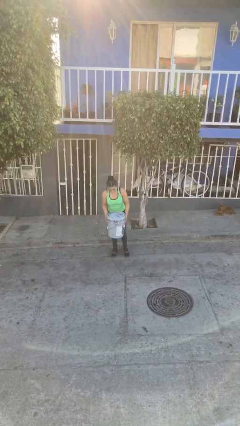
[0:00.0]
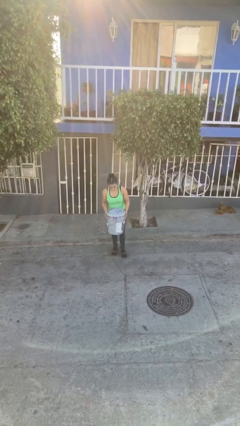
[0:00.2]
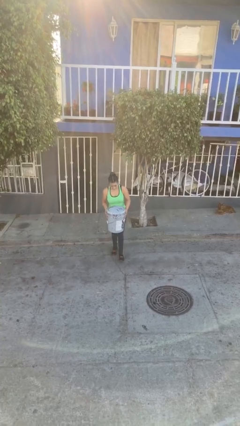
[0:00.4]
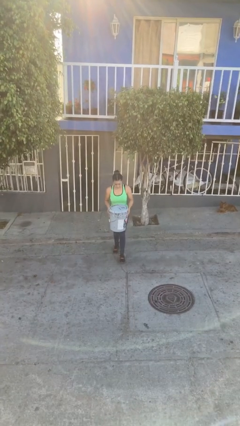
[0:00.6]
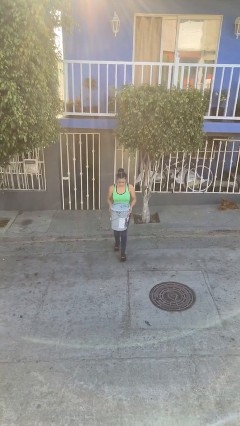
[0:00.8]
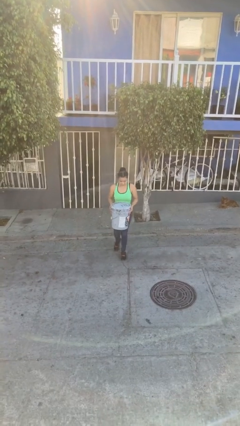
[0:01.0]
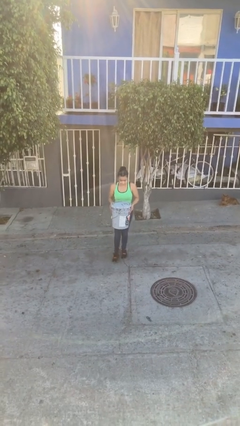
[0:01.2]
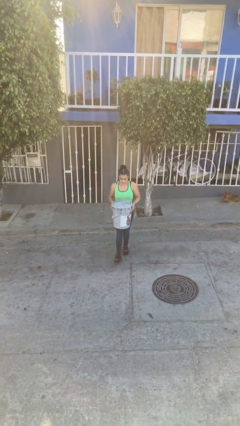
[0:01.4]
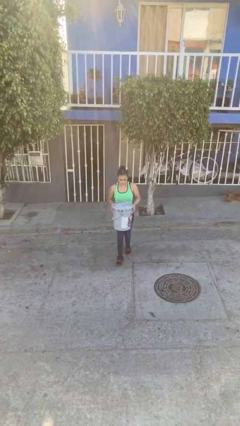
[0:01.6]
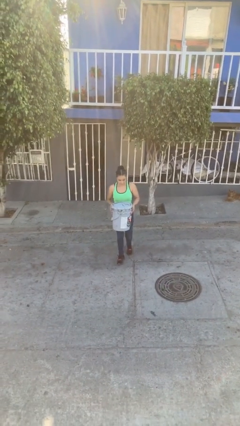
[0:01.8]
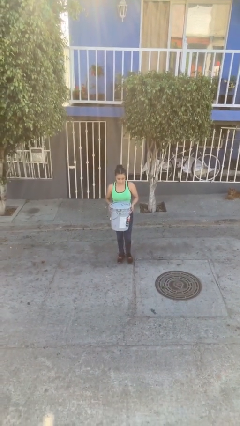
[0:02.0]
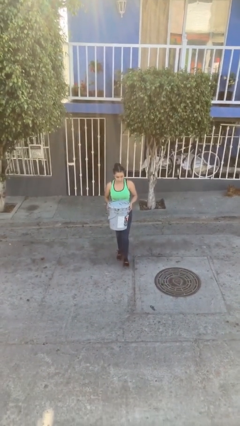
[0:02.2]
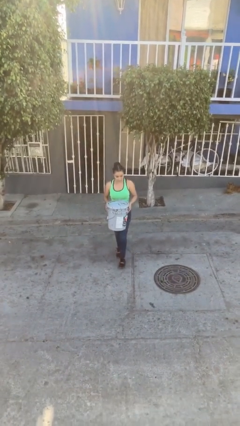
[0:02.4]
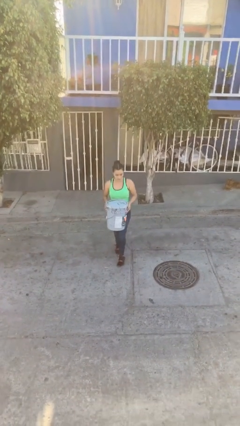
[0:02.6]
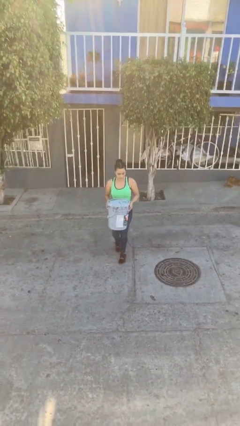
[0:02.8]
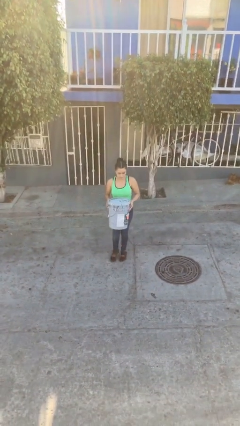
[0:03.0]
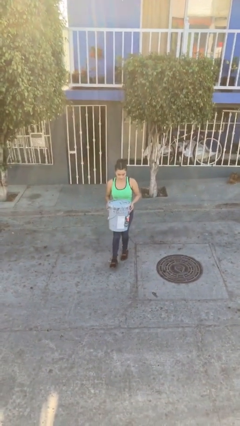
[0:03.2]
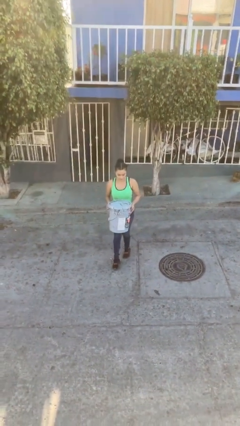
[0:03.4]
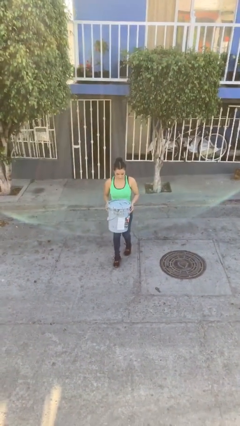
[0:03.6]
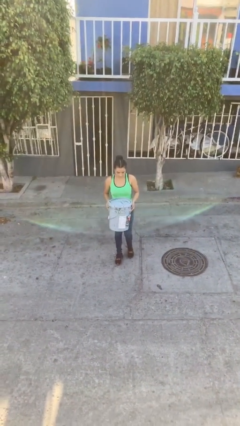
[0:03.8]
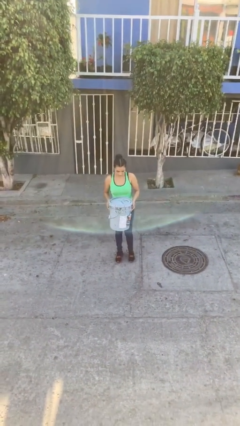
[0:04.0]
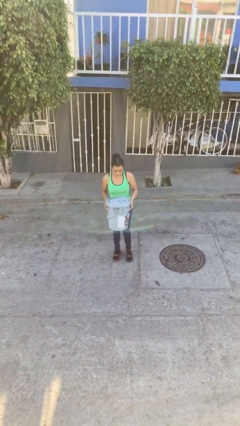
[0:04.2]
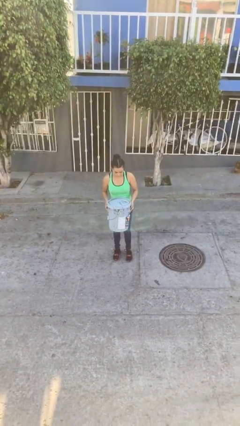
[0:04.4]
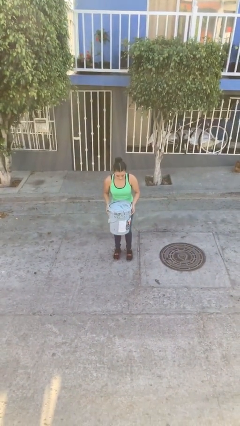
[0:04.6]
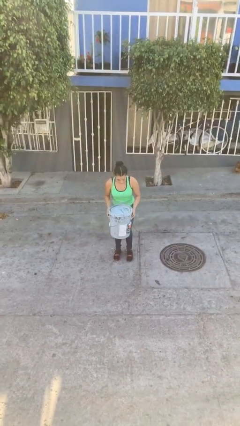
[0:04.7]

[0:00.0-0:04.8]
person carries heavy object

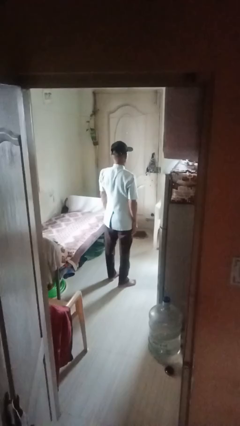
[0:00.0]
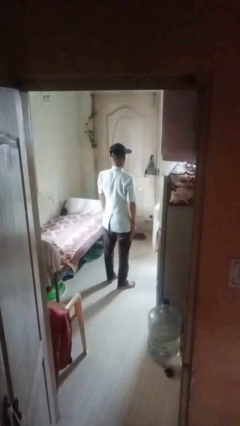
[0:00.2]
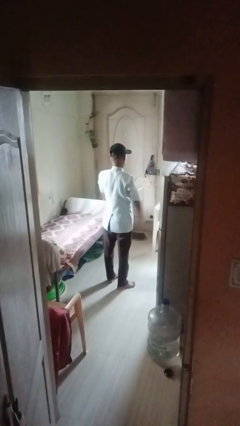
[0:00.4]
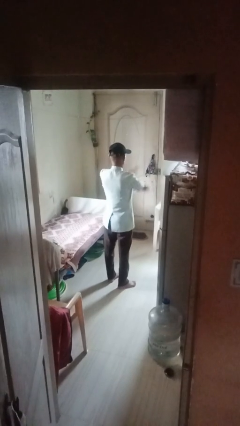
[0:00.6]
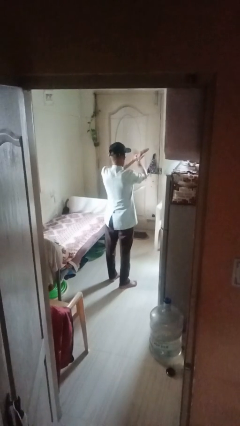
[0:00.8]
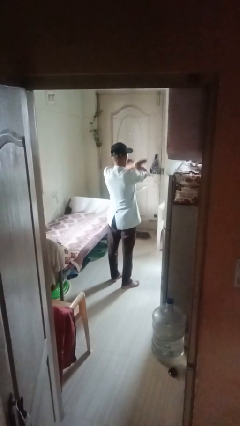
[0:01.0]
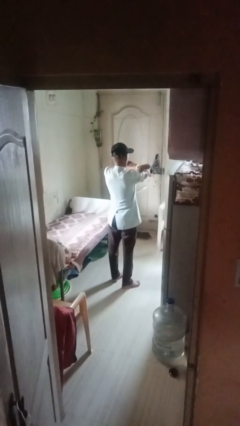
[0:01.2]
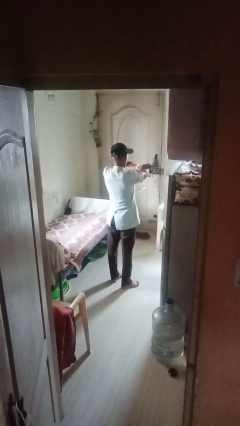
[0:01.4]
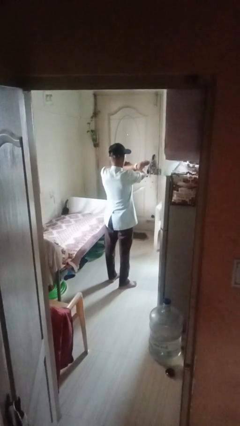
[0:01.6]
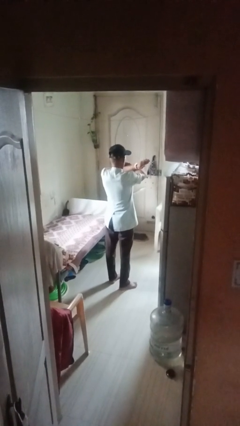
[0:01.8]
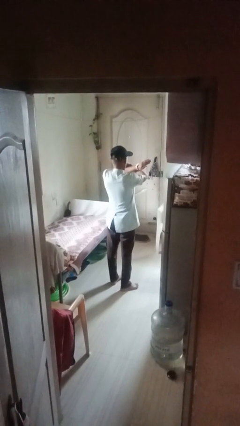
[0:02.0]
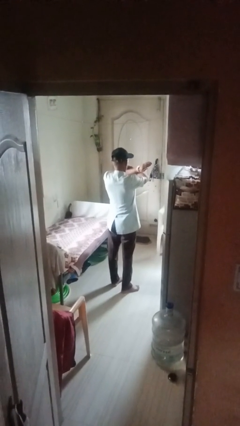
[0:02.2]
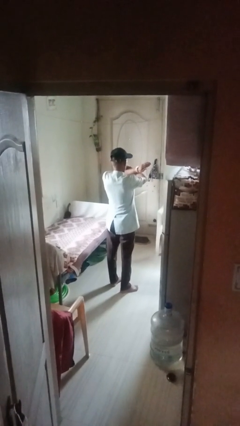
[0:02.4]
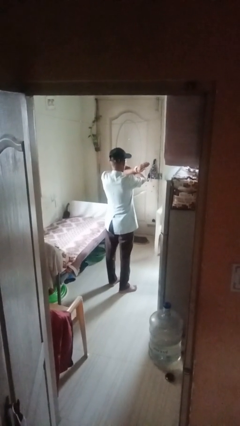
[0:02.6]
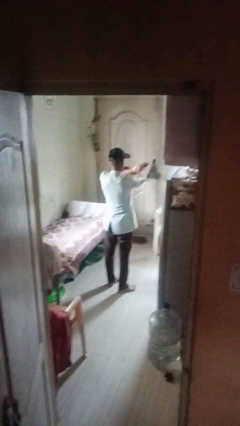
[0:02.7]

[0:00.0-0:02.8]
person gestures arms x

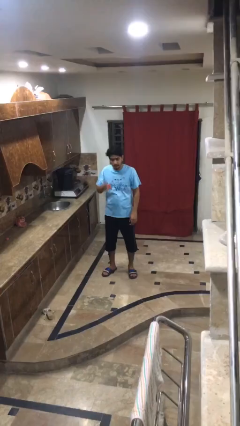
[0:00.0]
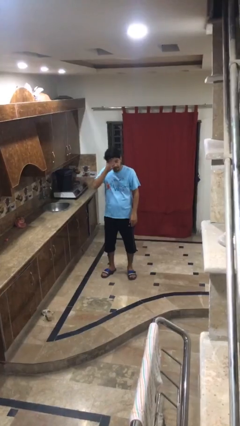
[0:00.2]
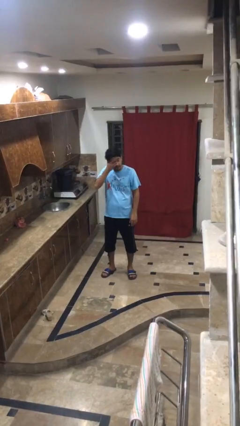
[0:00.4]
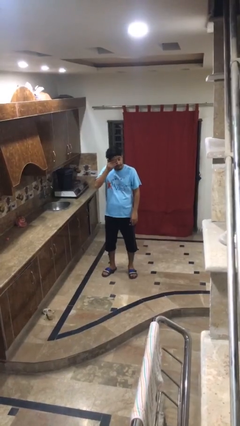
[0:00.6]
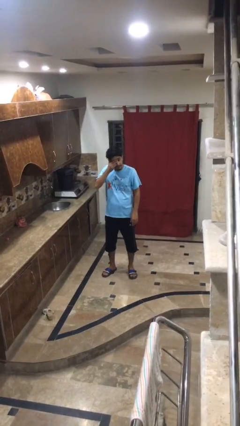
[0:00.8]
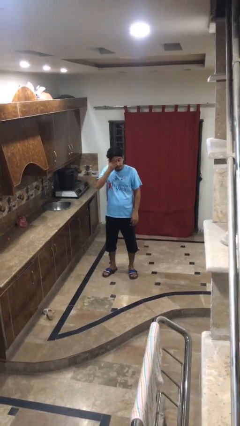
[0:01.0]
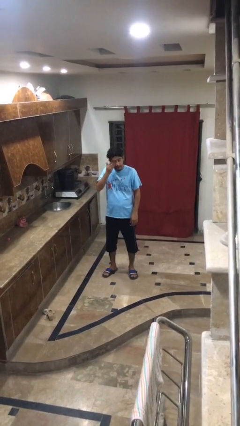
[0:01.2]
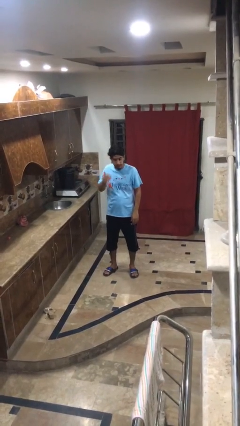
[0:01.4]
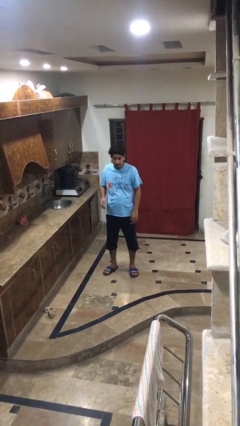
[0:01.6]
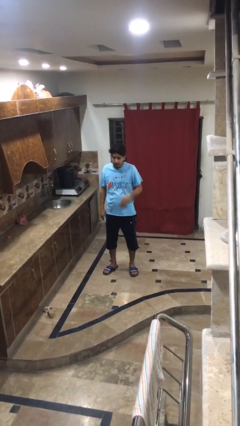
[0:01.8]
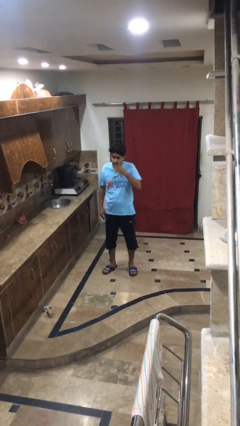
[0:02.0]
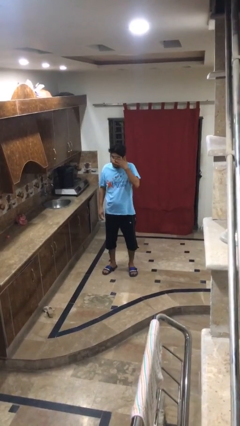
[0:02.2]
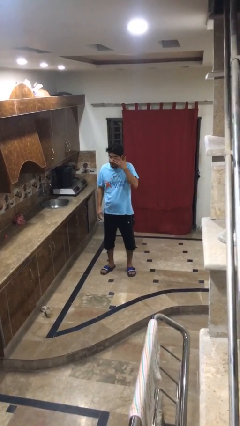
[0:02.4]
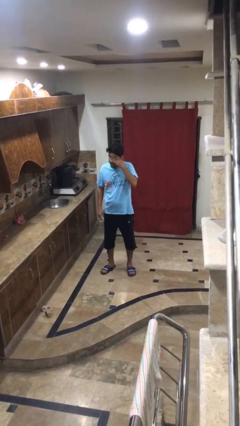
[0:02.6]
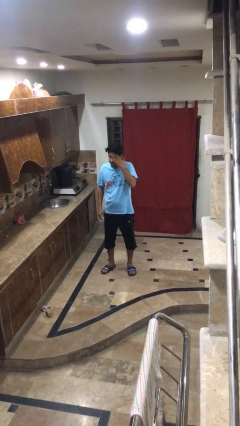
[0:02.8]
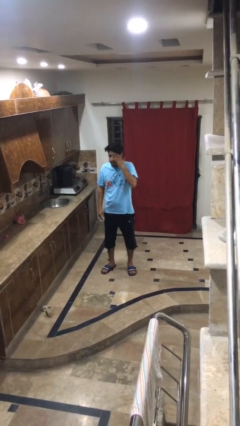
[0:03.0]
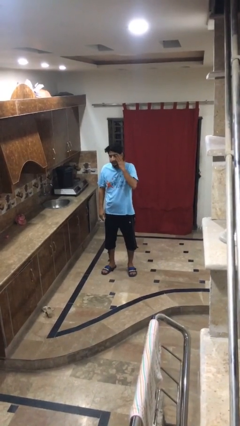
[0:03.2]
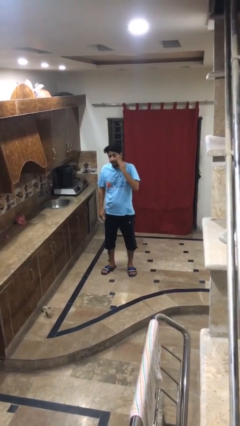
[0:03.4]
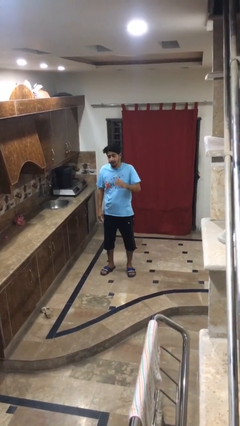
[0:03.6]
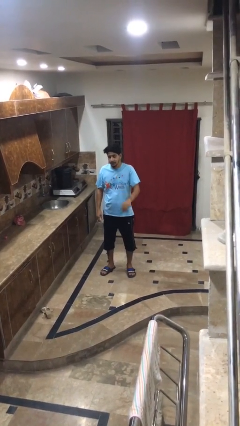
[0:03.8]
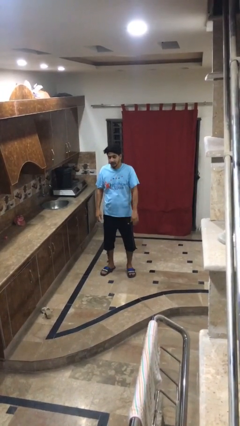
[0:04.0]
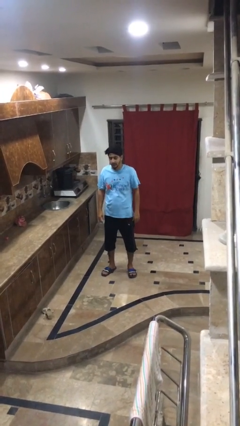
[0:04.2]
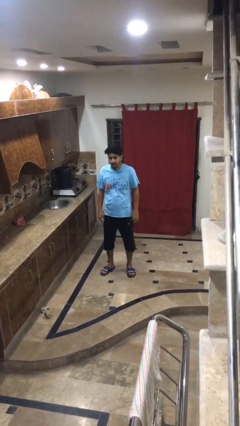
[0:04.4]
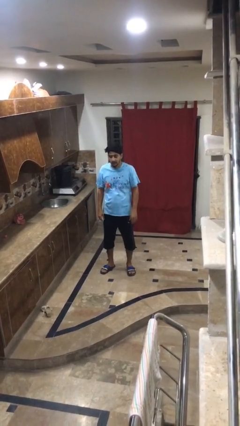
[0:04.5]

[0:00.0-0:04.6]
person rubs eyes

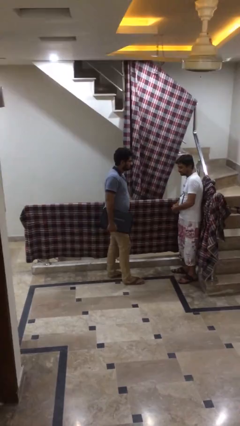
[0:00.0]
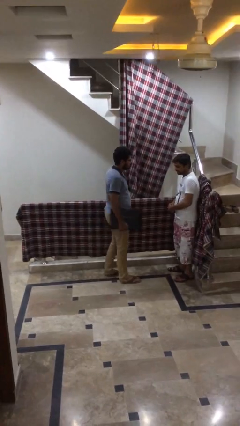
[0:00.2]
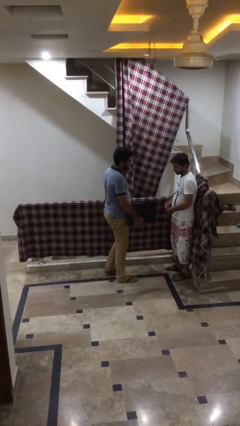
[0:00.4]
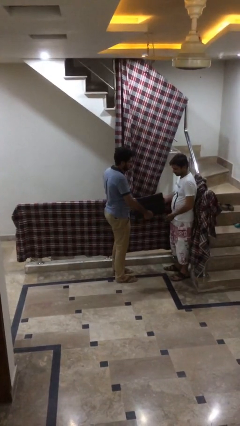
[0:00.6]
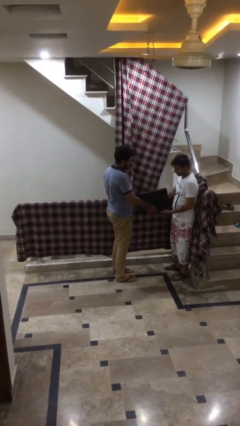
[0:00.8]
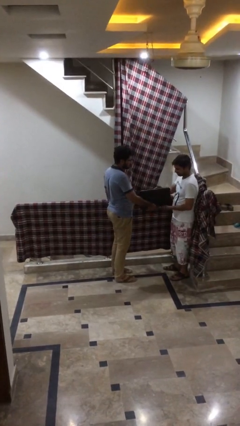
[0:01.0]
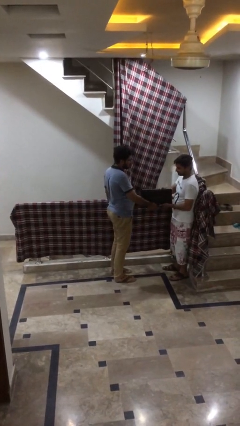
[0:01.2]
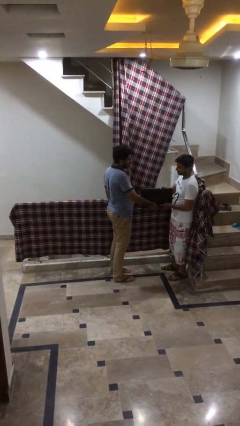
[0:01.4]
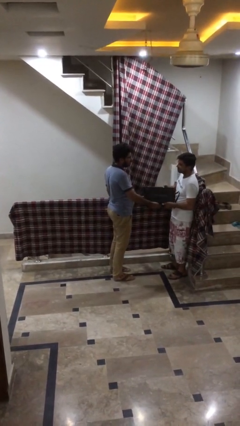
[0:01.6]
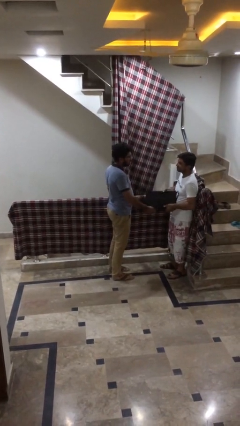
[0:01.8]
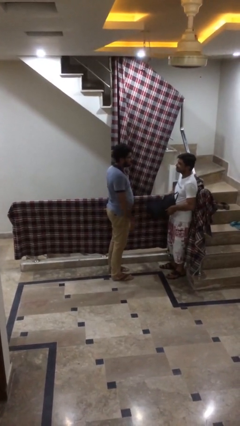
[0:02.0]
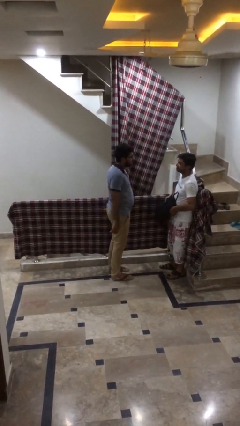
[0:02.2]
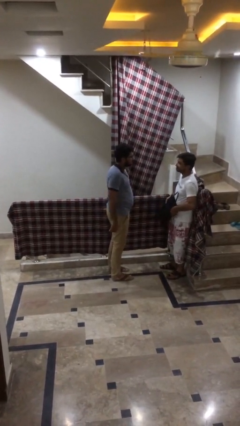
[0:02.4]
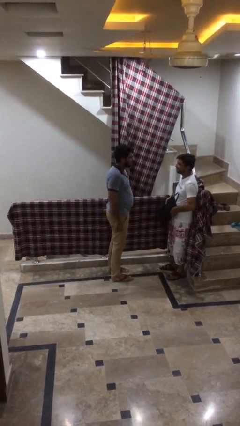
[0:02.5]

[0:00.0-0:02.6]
person transfers object to person

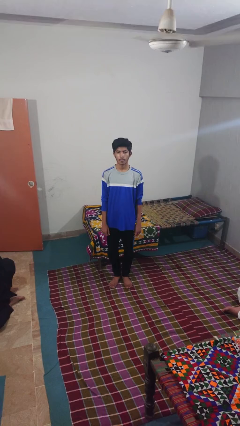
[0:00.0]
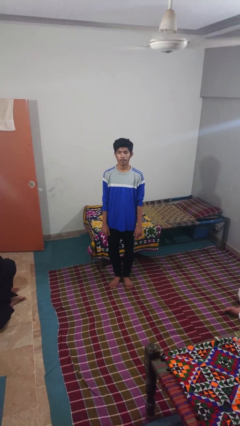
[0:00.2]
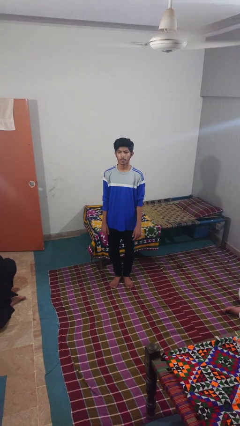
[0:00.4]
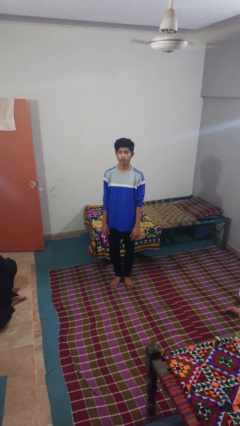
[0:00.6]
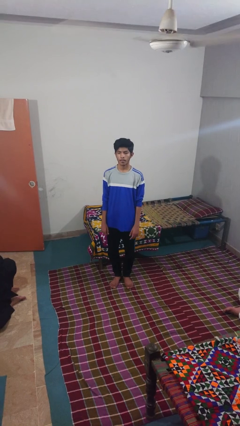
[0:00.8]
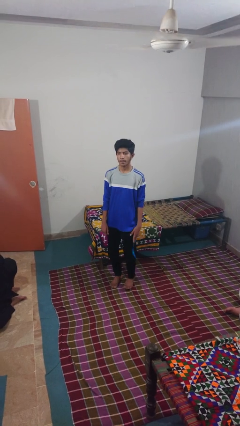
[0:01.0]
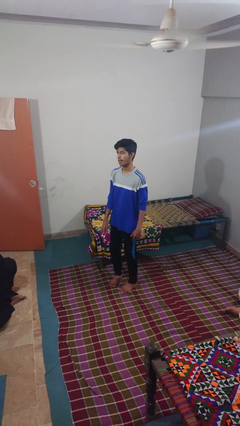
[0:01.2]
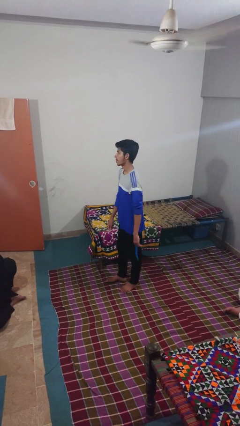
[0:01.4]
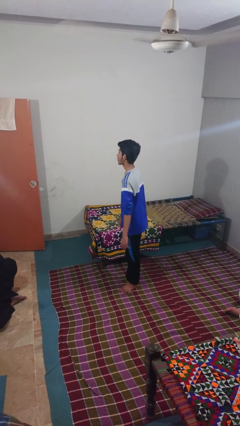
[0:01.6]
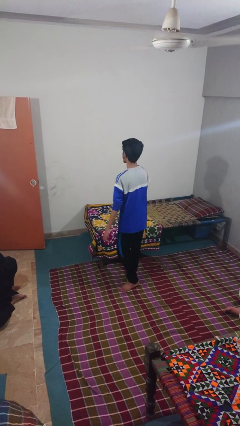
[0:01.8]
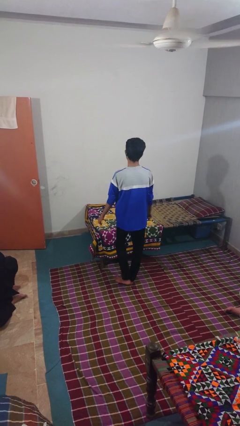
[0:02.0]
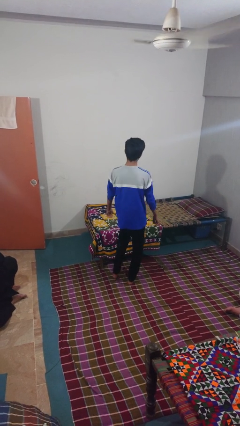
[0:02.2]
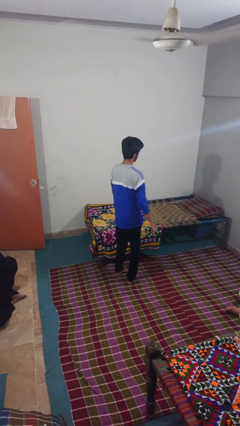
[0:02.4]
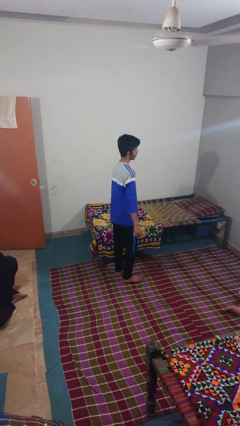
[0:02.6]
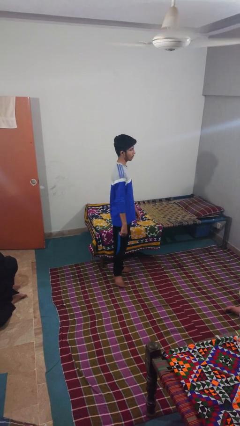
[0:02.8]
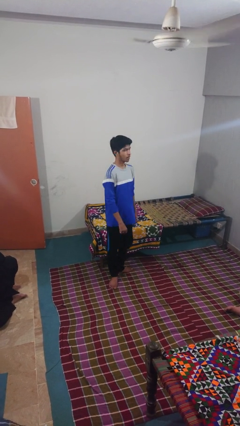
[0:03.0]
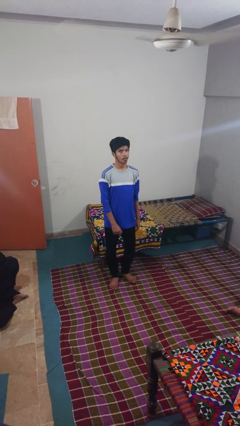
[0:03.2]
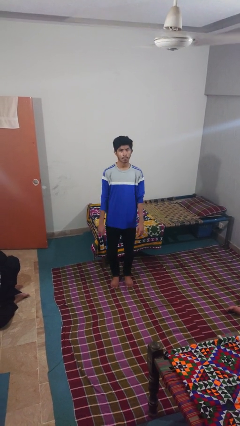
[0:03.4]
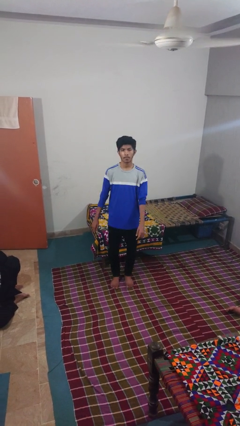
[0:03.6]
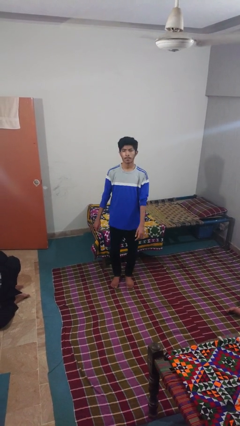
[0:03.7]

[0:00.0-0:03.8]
person twirls
